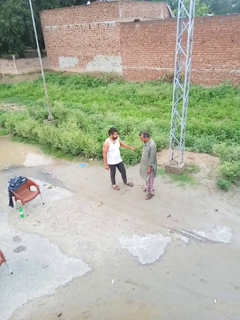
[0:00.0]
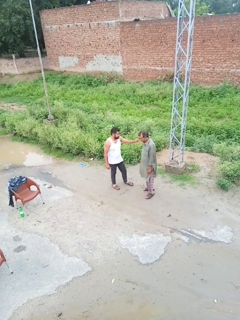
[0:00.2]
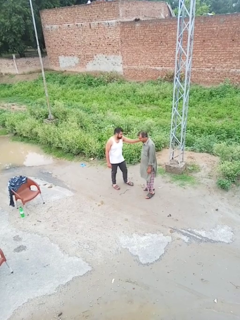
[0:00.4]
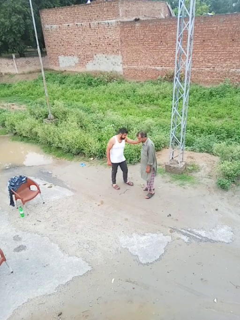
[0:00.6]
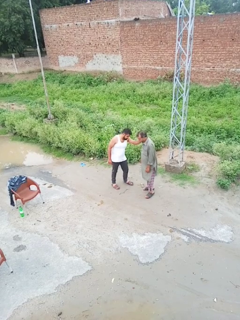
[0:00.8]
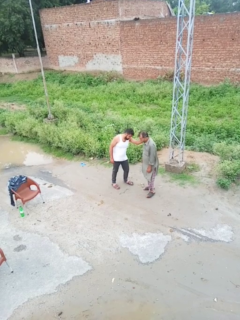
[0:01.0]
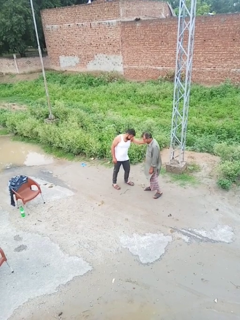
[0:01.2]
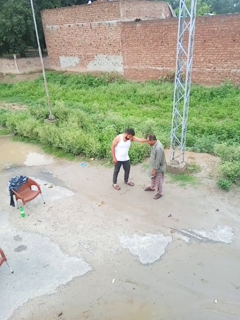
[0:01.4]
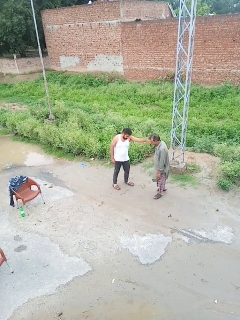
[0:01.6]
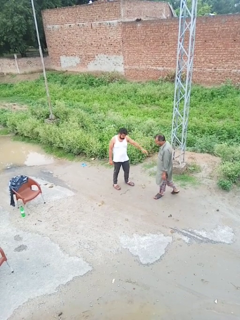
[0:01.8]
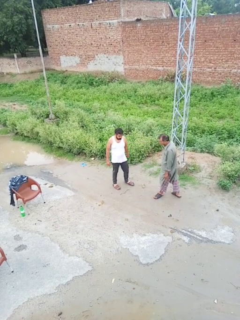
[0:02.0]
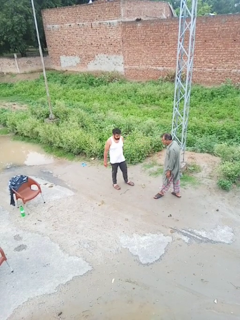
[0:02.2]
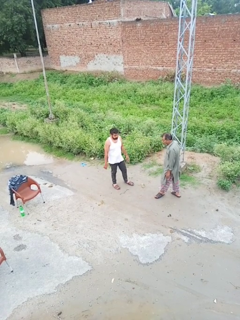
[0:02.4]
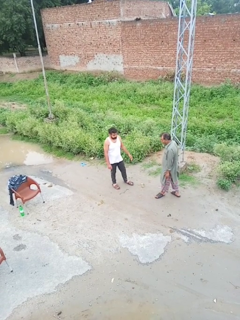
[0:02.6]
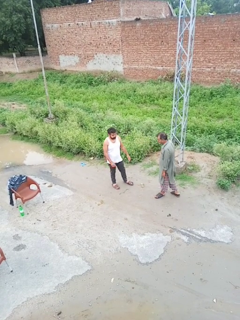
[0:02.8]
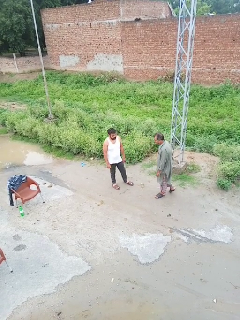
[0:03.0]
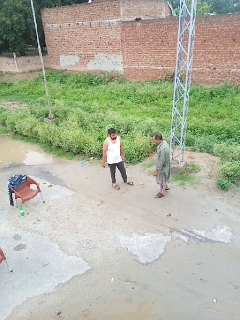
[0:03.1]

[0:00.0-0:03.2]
person shoves person

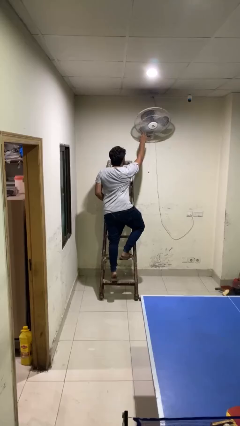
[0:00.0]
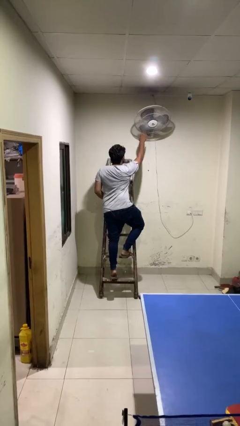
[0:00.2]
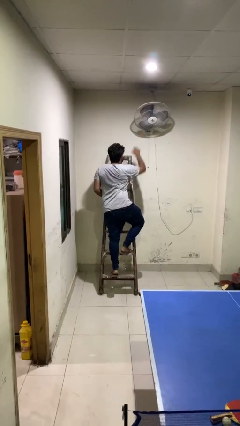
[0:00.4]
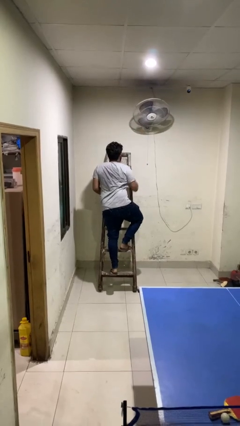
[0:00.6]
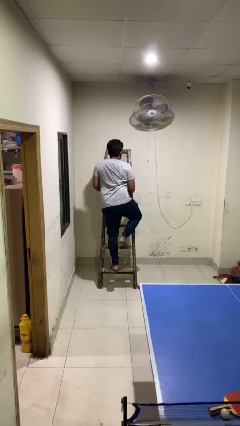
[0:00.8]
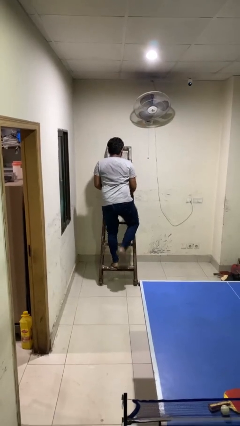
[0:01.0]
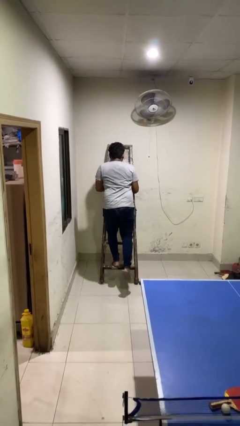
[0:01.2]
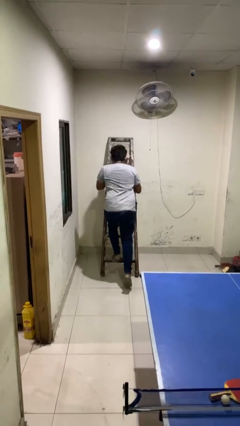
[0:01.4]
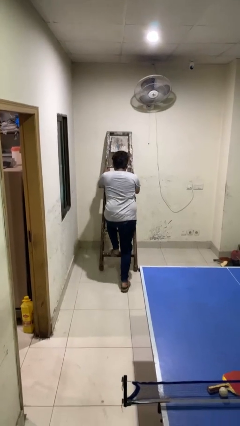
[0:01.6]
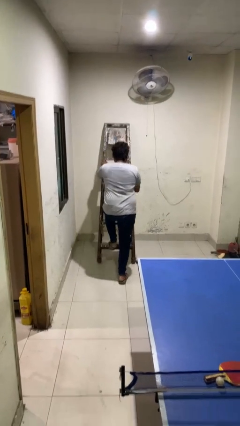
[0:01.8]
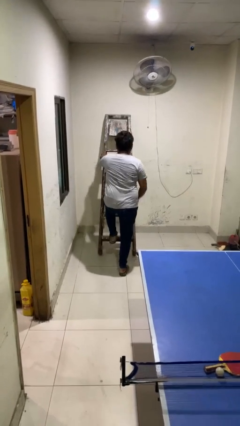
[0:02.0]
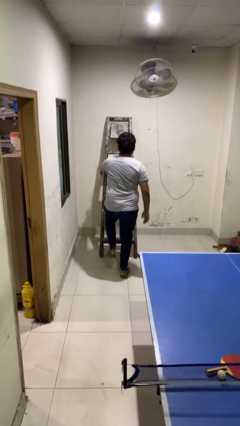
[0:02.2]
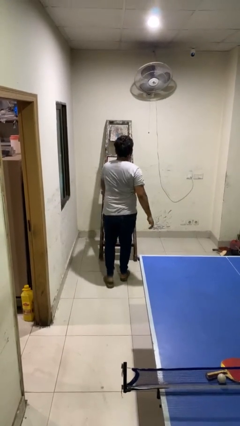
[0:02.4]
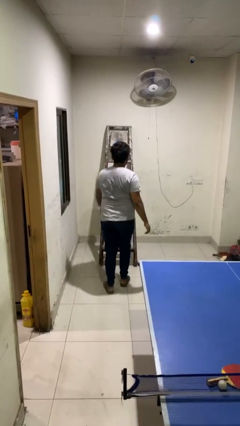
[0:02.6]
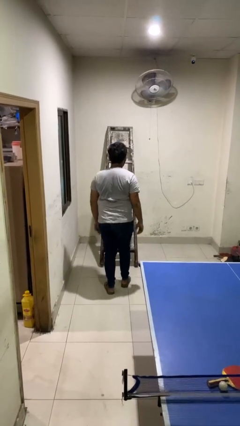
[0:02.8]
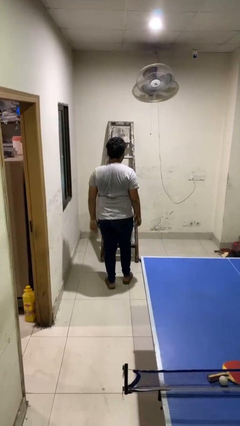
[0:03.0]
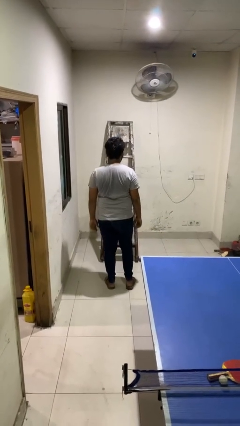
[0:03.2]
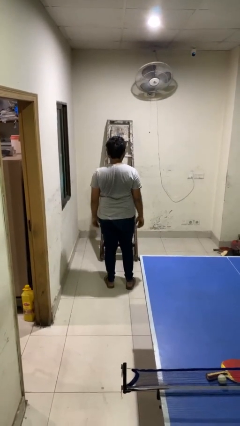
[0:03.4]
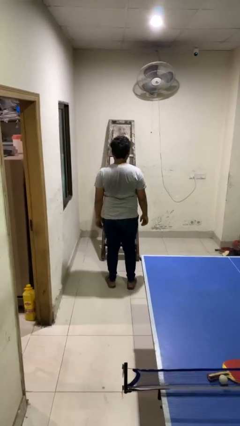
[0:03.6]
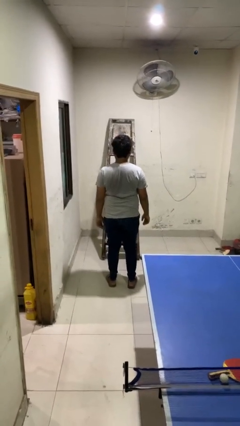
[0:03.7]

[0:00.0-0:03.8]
person climbs down ladder

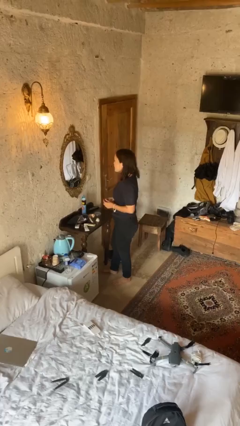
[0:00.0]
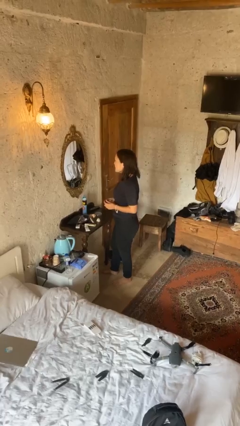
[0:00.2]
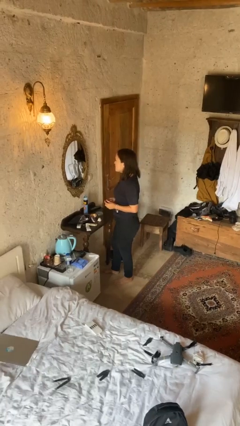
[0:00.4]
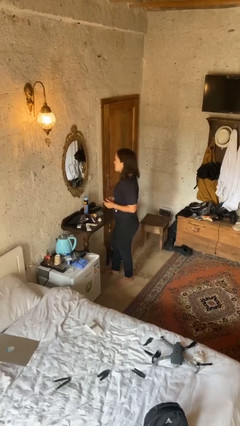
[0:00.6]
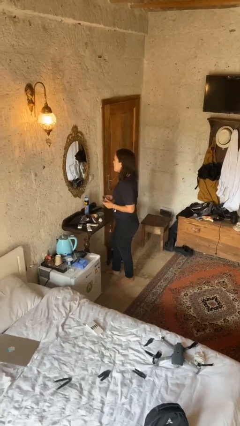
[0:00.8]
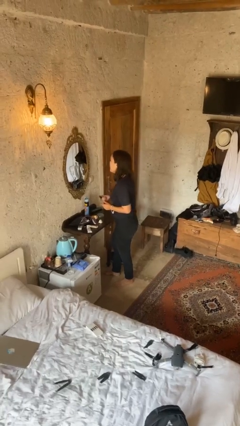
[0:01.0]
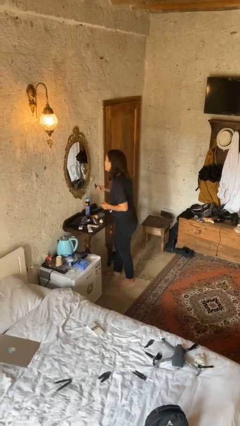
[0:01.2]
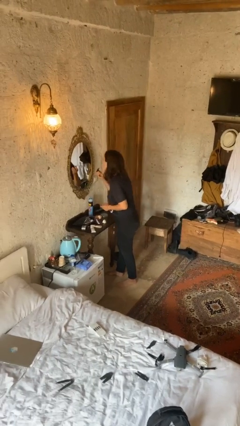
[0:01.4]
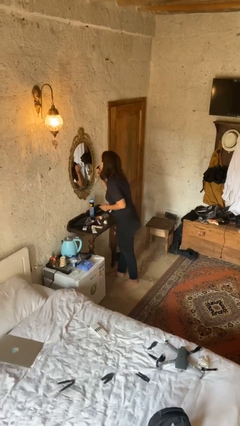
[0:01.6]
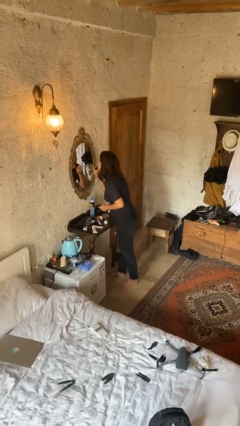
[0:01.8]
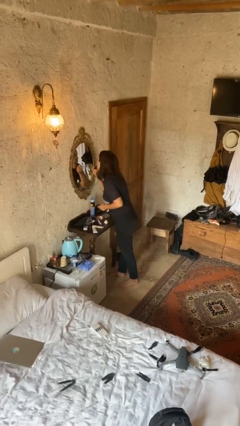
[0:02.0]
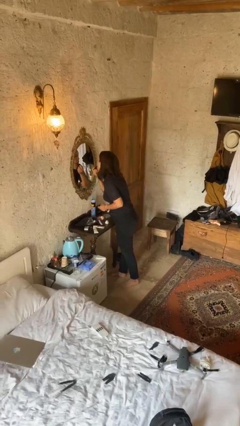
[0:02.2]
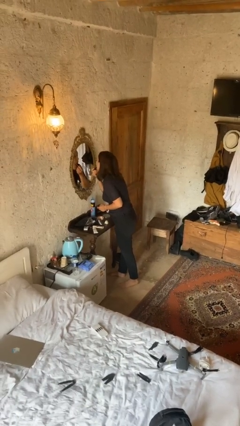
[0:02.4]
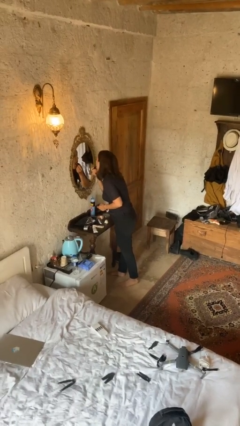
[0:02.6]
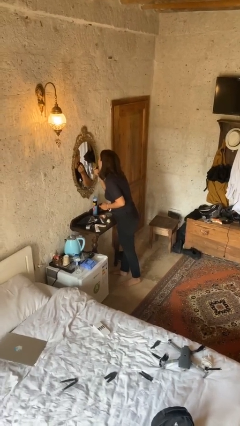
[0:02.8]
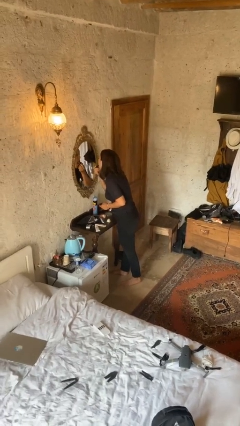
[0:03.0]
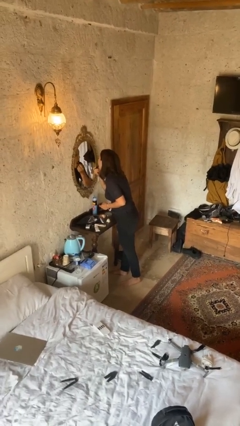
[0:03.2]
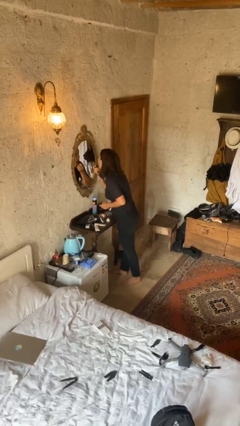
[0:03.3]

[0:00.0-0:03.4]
person applies lip makeup

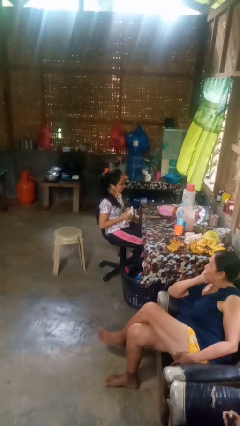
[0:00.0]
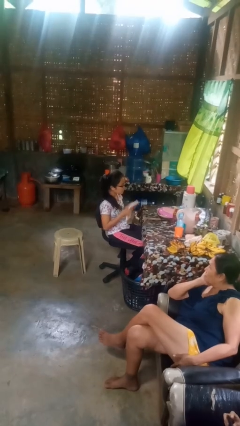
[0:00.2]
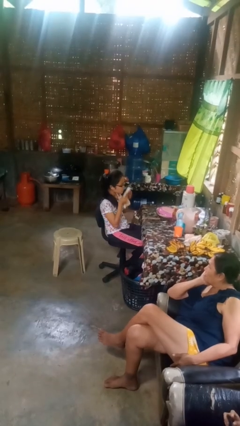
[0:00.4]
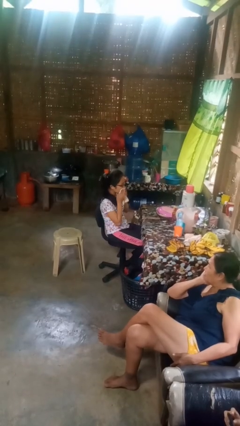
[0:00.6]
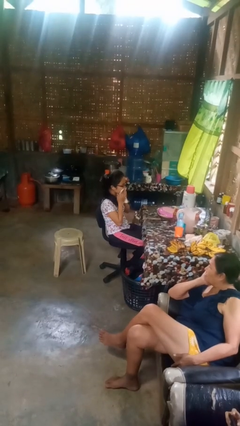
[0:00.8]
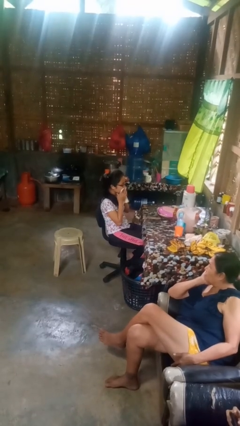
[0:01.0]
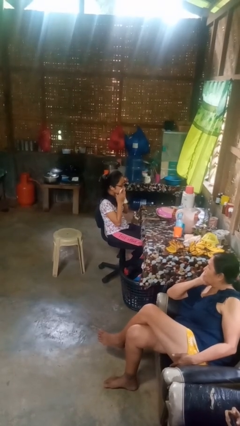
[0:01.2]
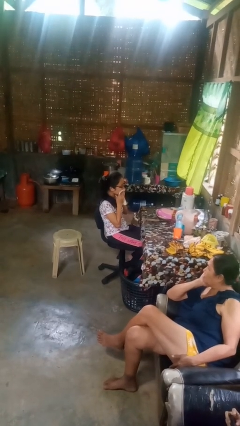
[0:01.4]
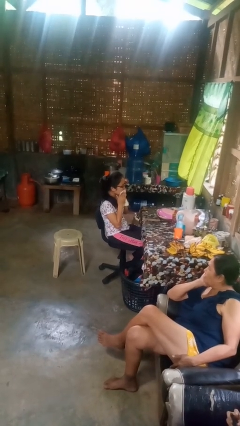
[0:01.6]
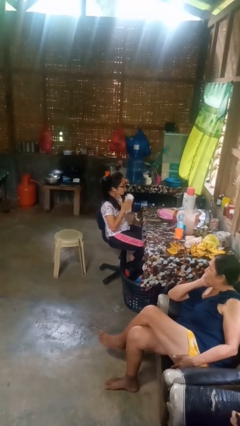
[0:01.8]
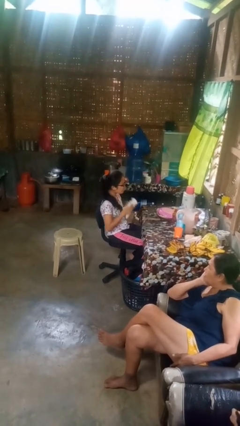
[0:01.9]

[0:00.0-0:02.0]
person wipes mouth with napkin

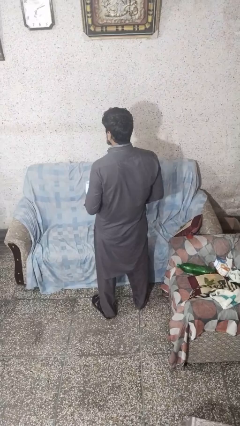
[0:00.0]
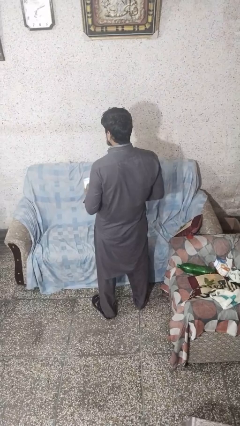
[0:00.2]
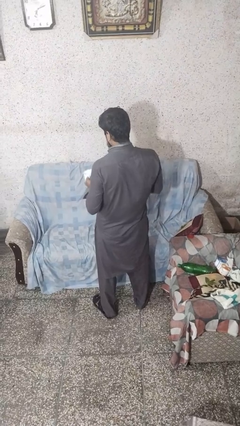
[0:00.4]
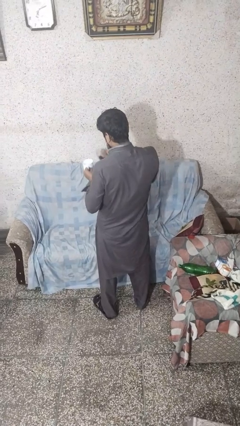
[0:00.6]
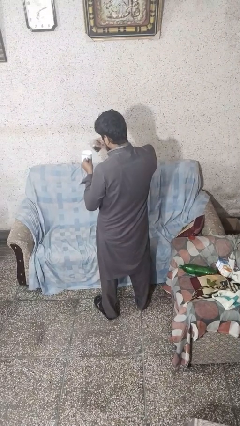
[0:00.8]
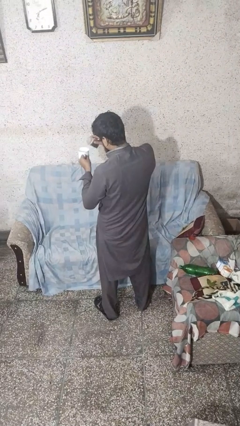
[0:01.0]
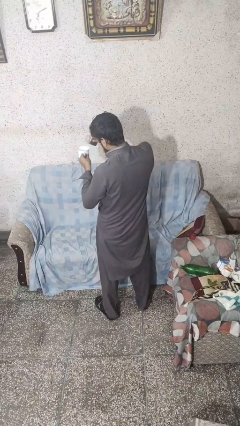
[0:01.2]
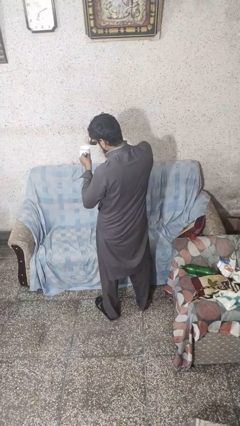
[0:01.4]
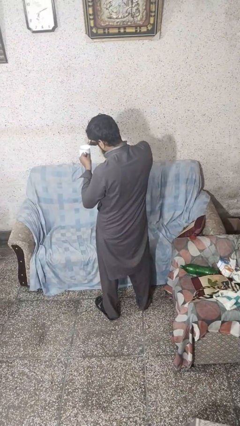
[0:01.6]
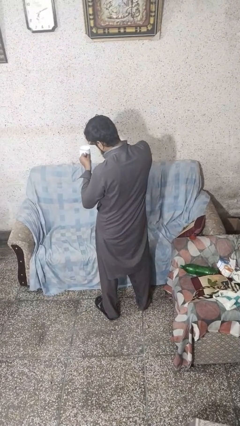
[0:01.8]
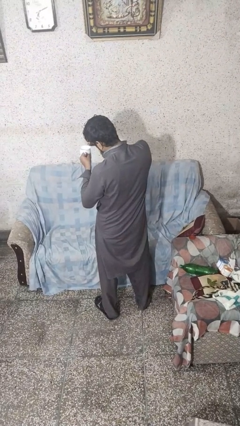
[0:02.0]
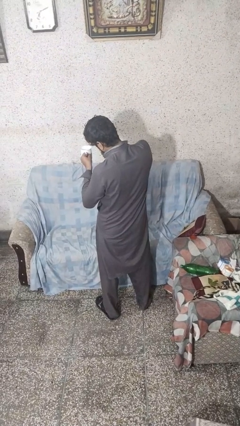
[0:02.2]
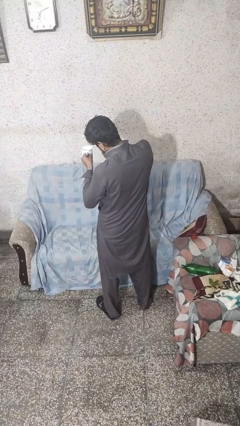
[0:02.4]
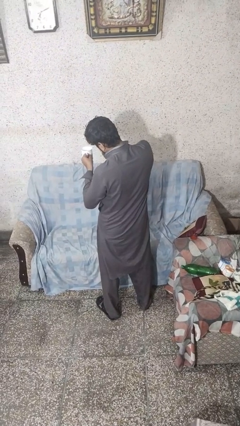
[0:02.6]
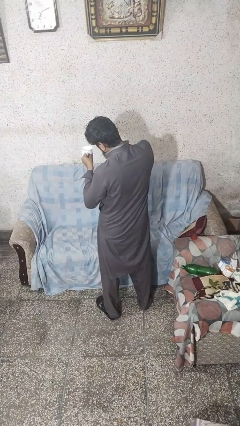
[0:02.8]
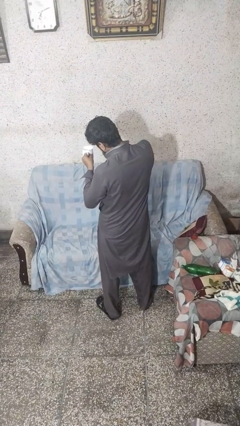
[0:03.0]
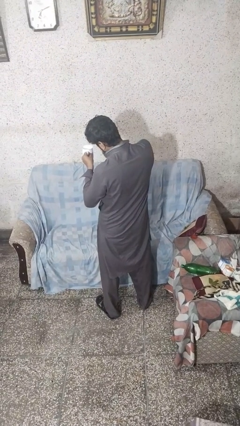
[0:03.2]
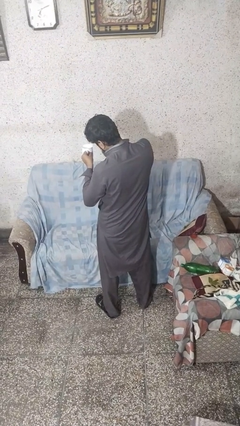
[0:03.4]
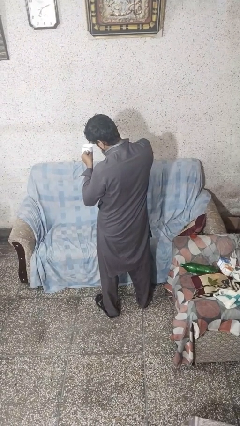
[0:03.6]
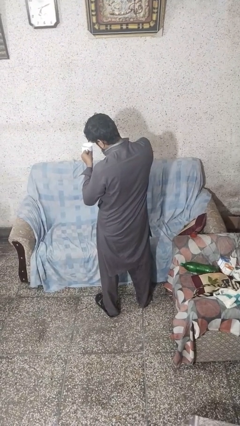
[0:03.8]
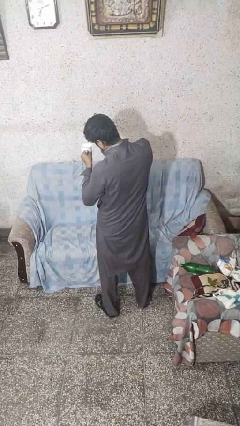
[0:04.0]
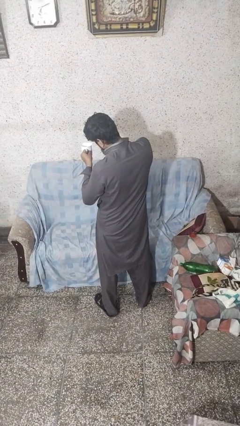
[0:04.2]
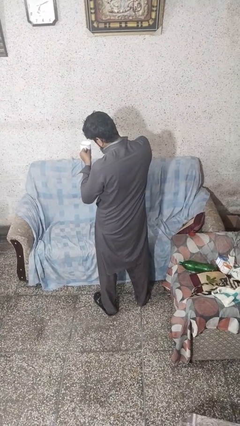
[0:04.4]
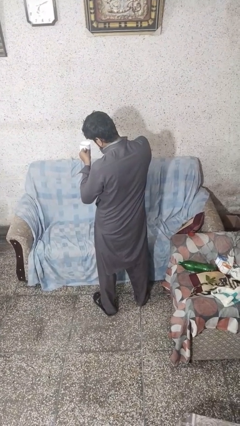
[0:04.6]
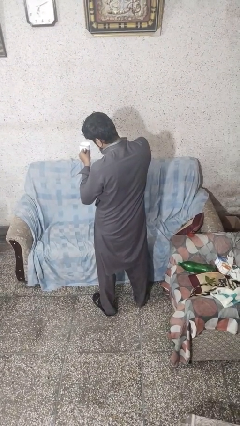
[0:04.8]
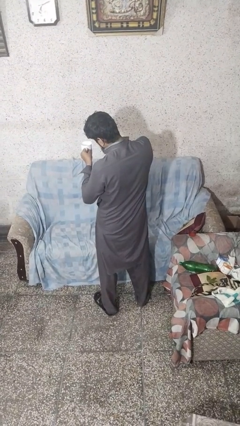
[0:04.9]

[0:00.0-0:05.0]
person pours coffee into mug

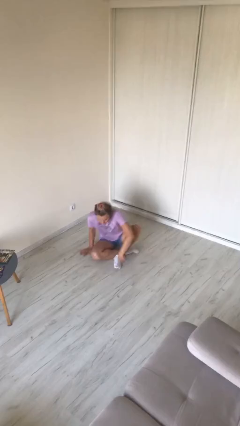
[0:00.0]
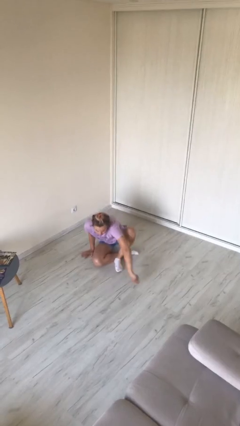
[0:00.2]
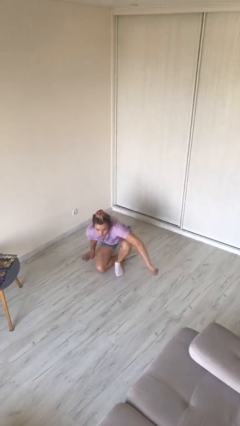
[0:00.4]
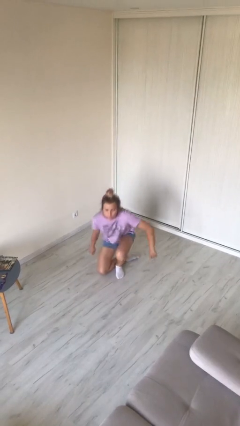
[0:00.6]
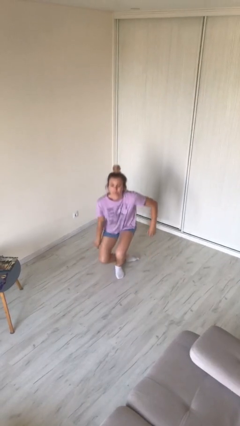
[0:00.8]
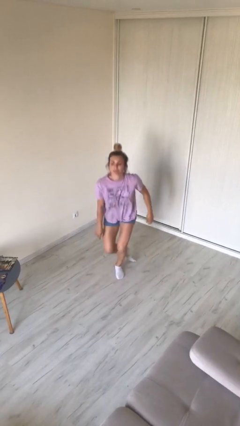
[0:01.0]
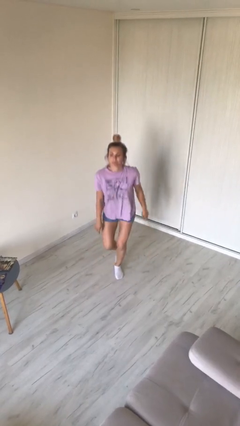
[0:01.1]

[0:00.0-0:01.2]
person stands up from floor
